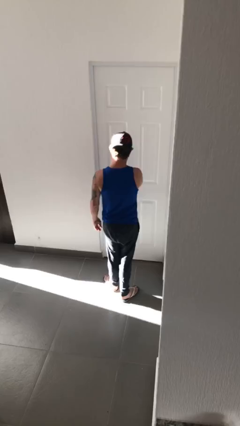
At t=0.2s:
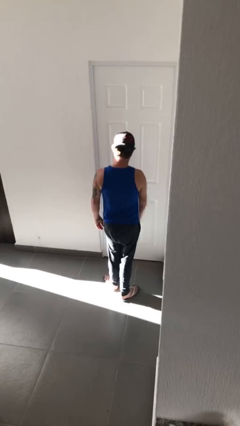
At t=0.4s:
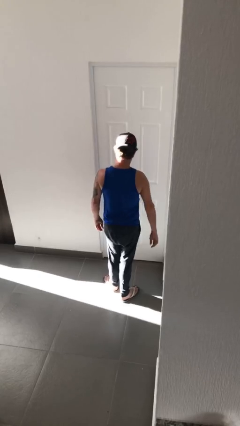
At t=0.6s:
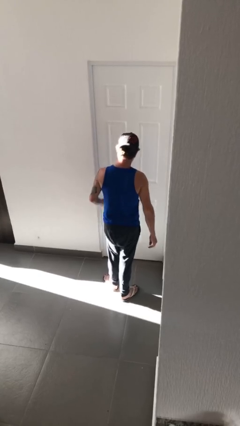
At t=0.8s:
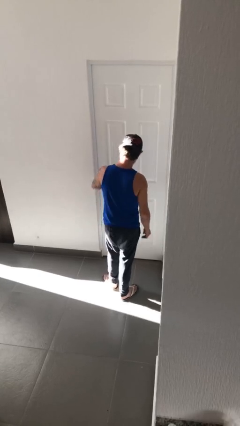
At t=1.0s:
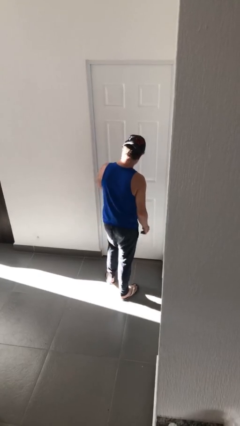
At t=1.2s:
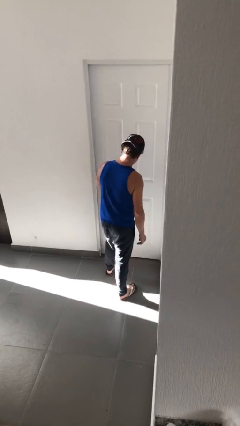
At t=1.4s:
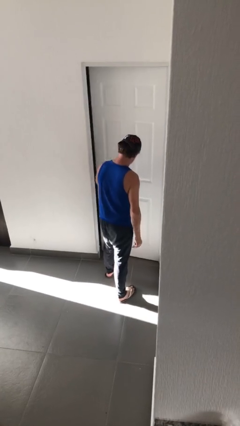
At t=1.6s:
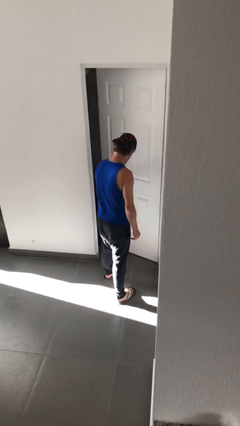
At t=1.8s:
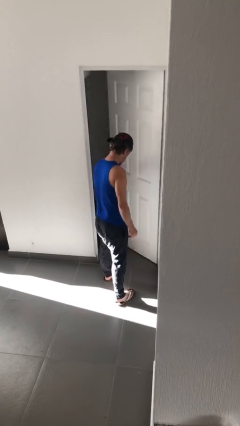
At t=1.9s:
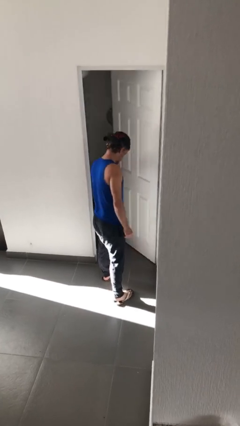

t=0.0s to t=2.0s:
person opens facility door

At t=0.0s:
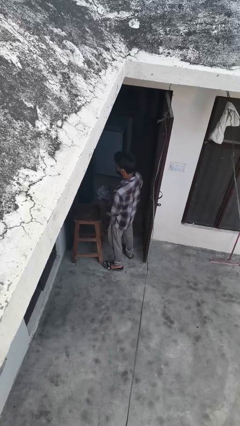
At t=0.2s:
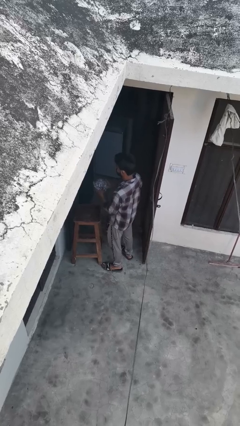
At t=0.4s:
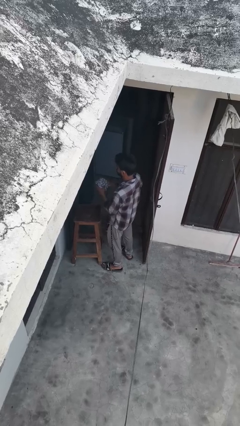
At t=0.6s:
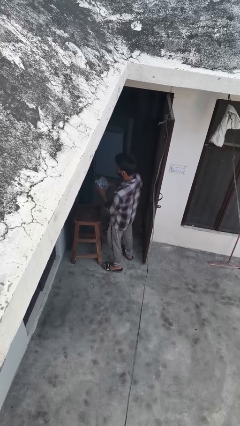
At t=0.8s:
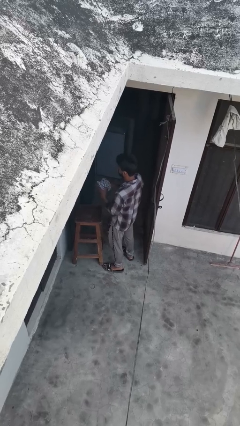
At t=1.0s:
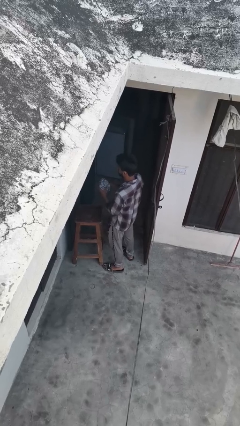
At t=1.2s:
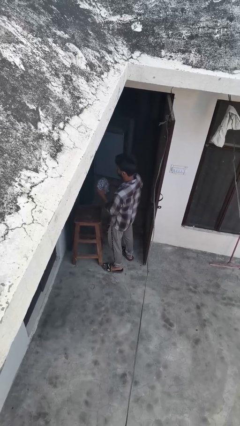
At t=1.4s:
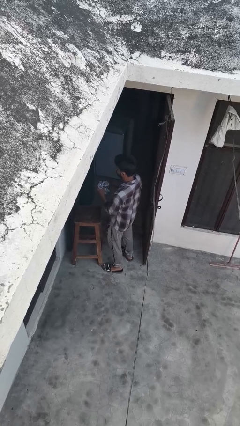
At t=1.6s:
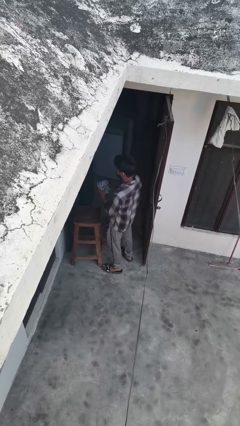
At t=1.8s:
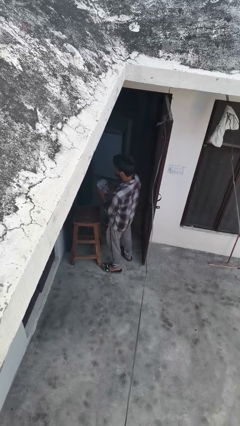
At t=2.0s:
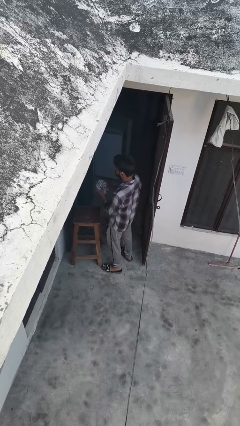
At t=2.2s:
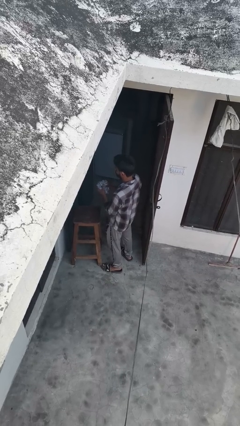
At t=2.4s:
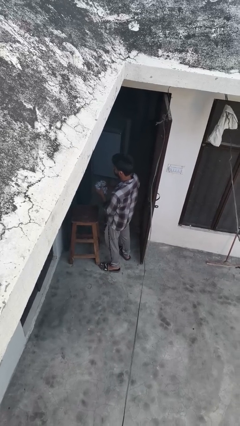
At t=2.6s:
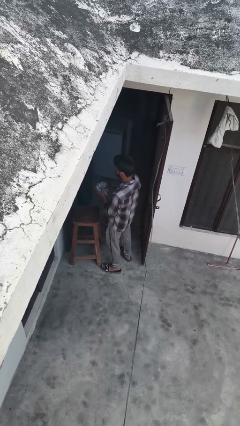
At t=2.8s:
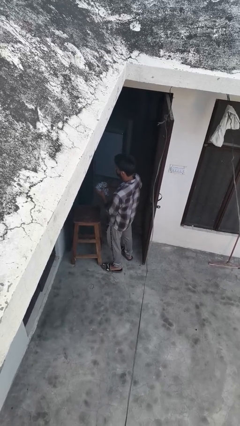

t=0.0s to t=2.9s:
person squeezes object

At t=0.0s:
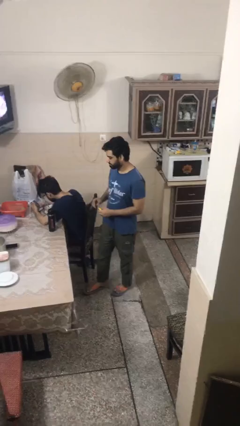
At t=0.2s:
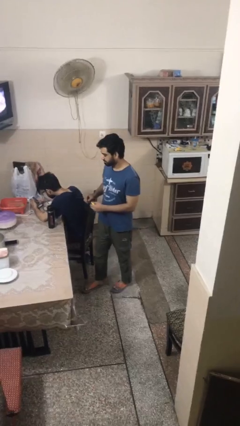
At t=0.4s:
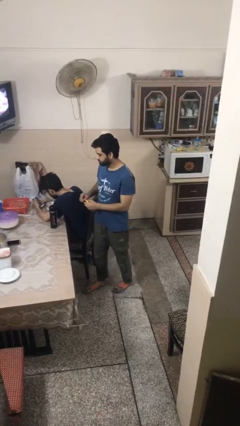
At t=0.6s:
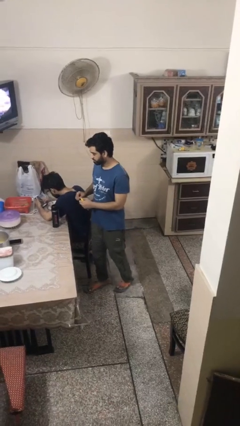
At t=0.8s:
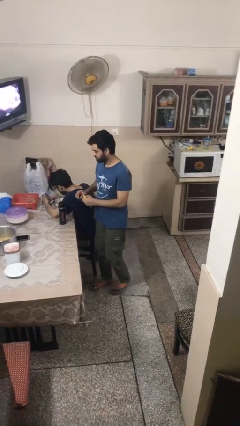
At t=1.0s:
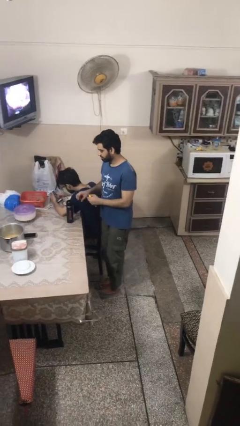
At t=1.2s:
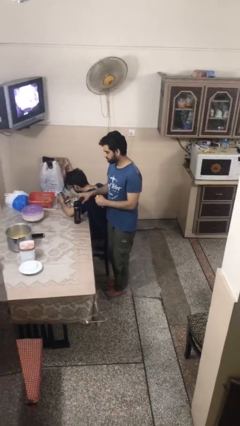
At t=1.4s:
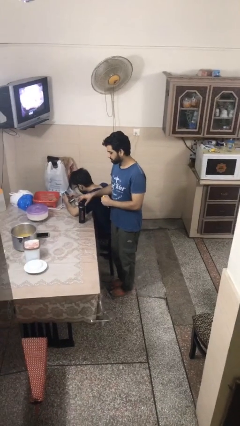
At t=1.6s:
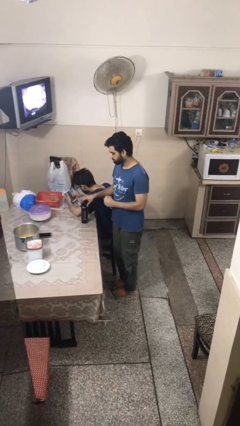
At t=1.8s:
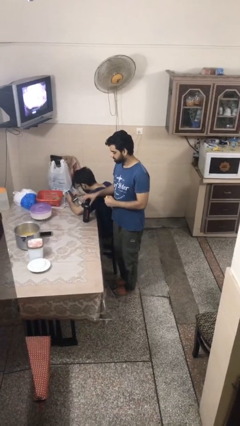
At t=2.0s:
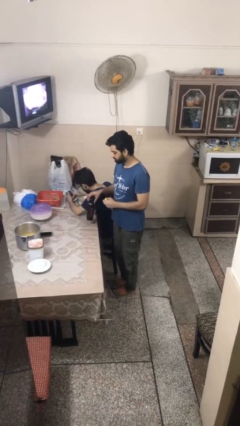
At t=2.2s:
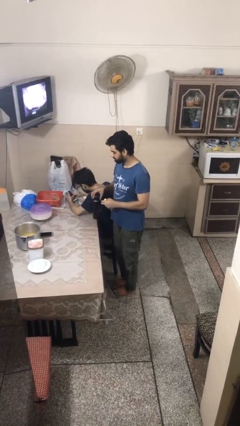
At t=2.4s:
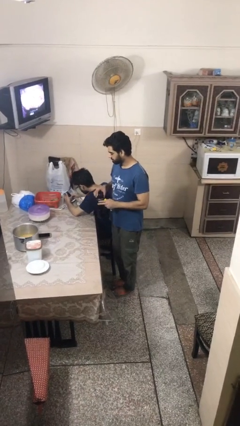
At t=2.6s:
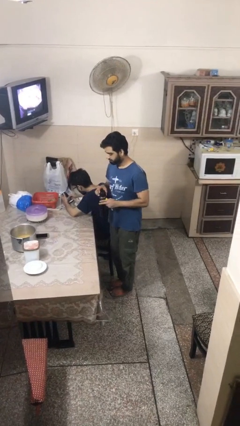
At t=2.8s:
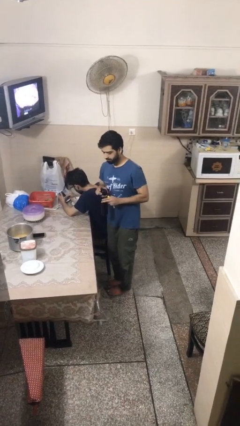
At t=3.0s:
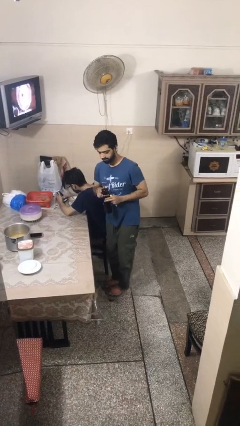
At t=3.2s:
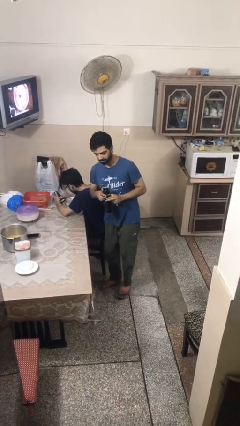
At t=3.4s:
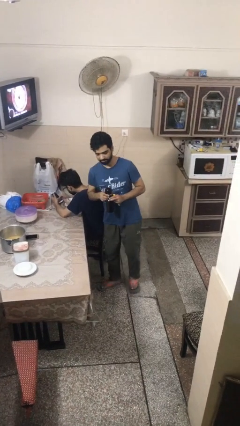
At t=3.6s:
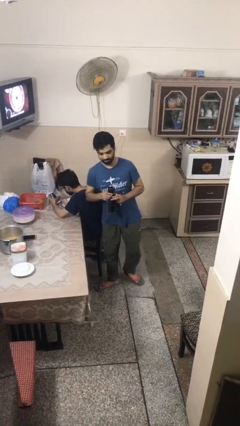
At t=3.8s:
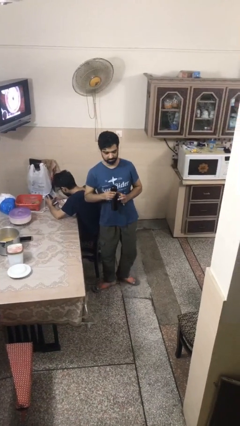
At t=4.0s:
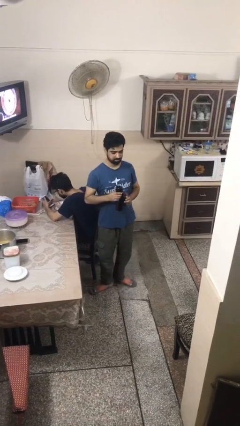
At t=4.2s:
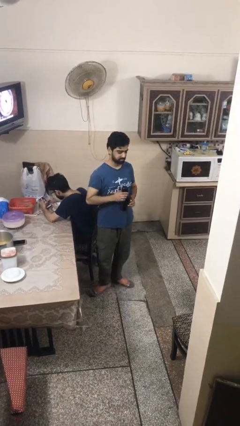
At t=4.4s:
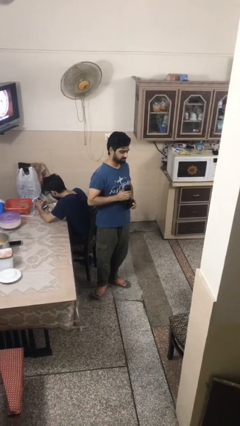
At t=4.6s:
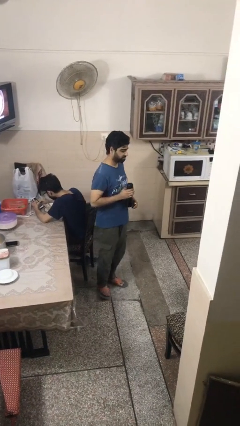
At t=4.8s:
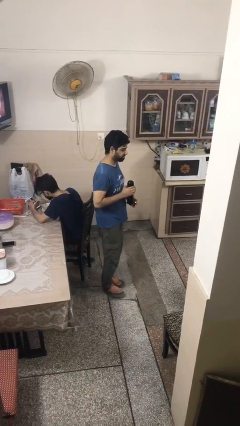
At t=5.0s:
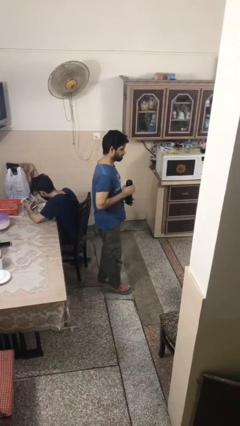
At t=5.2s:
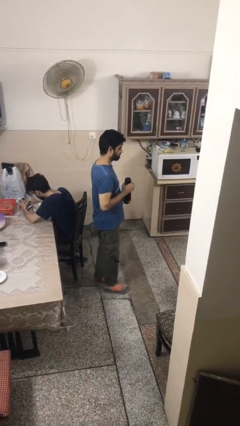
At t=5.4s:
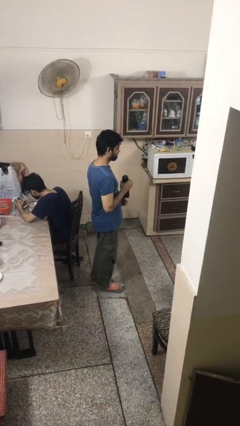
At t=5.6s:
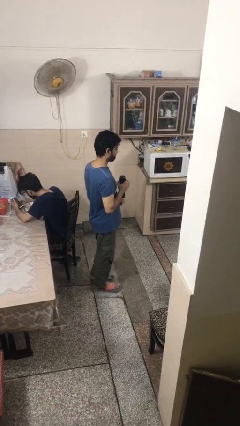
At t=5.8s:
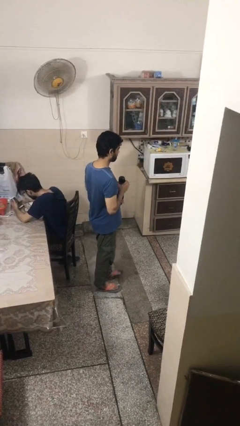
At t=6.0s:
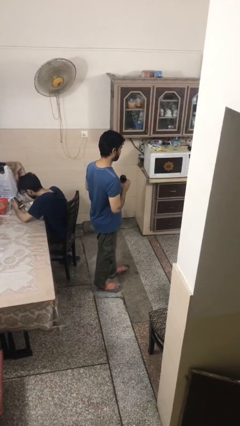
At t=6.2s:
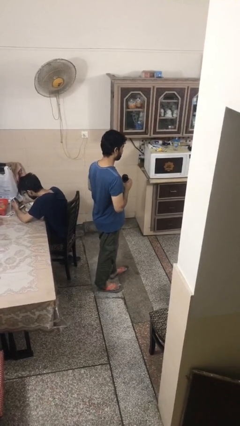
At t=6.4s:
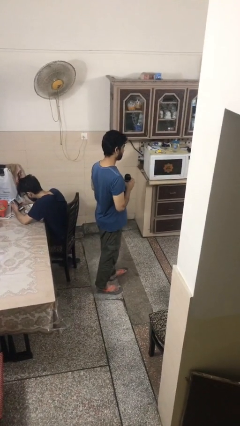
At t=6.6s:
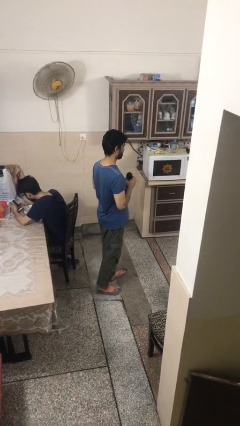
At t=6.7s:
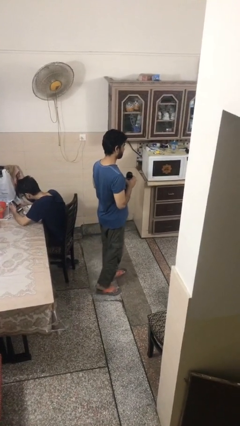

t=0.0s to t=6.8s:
person steals object from person

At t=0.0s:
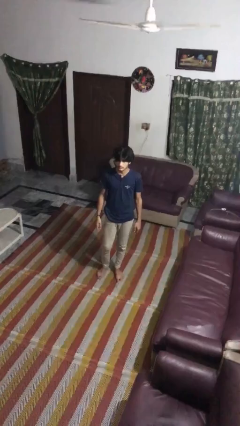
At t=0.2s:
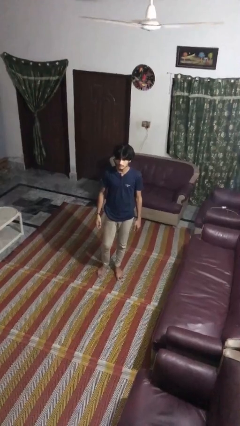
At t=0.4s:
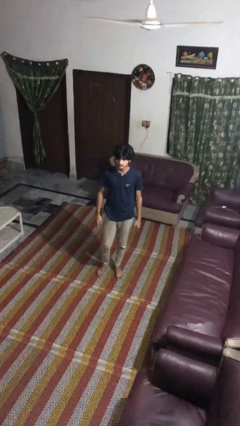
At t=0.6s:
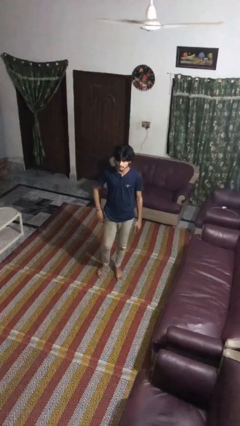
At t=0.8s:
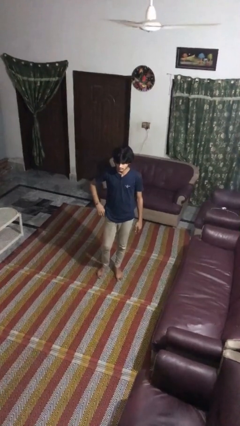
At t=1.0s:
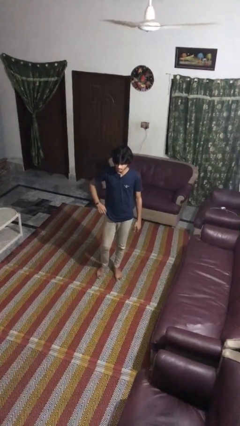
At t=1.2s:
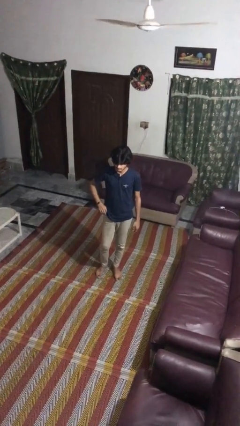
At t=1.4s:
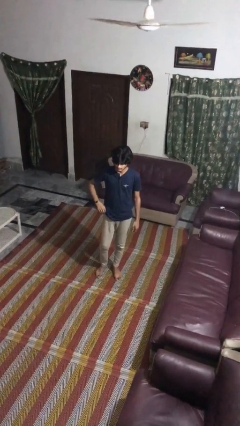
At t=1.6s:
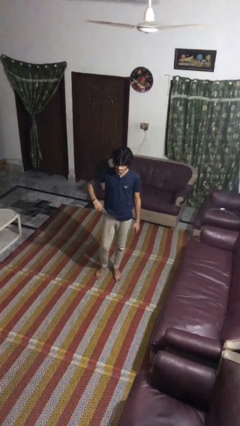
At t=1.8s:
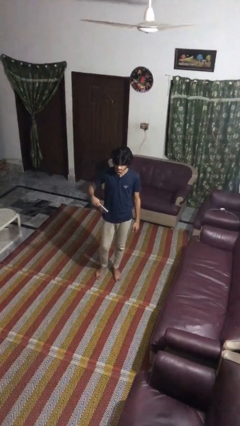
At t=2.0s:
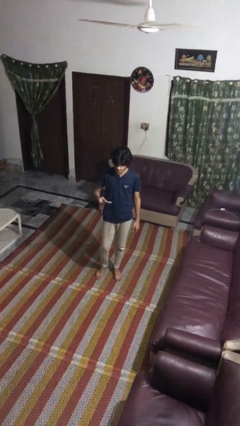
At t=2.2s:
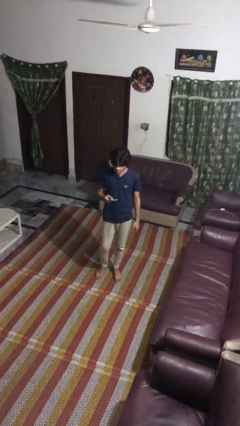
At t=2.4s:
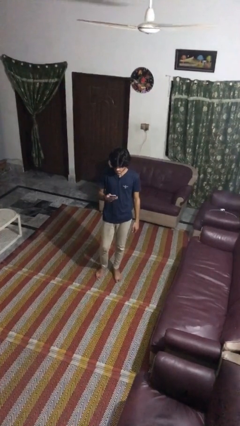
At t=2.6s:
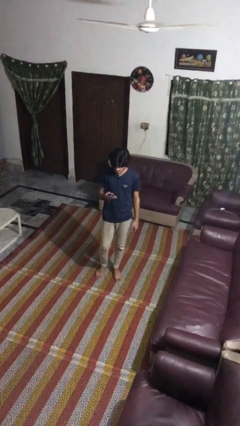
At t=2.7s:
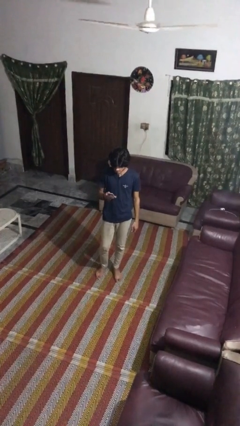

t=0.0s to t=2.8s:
person takes phone from pocket

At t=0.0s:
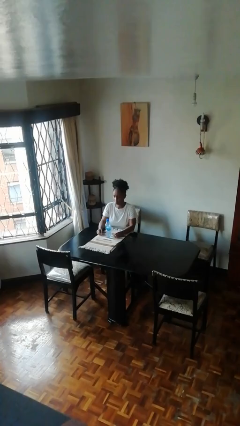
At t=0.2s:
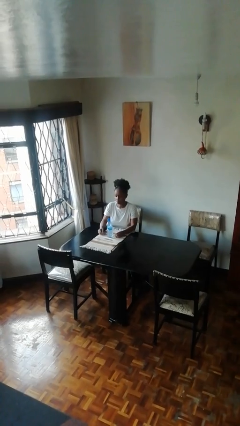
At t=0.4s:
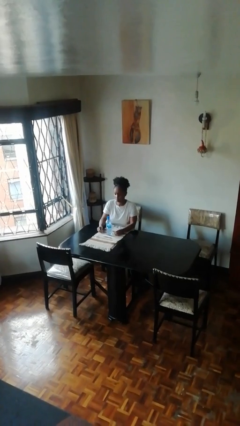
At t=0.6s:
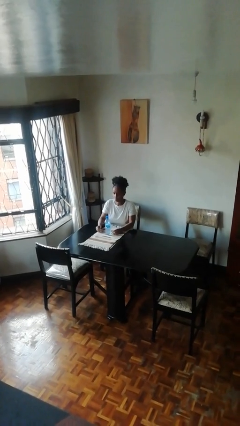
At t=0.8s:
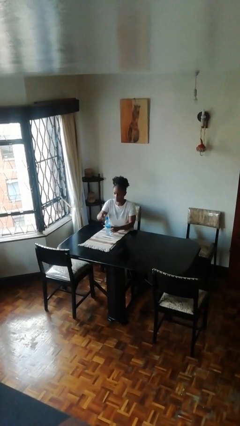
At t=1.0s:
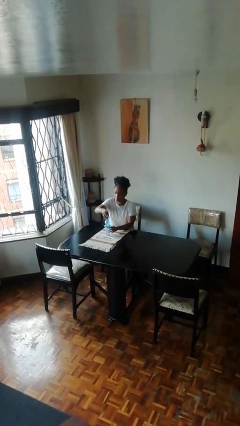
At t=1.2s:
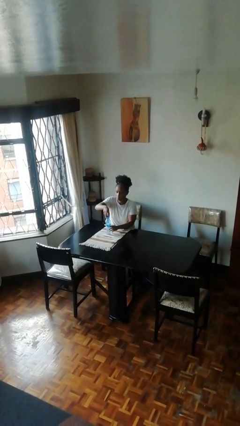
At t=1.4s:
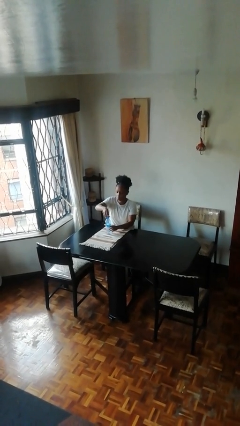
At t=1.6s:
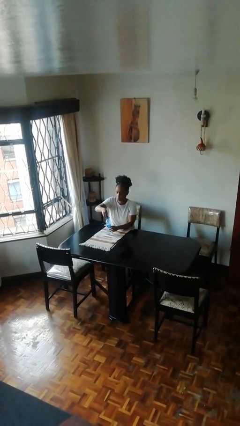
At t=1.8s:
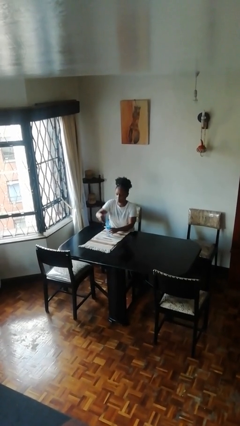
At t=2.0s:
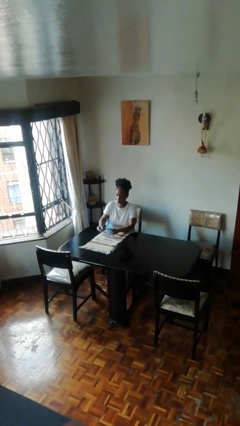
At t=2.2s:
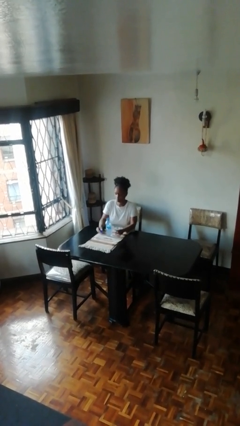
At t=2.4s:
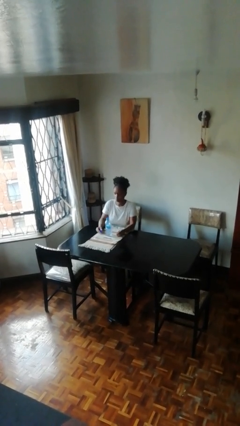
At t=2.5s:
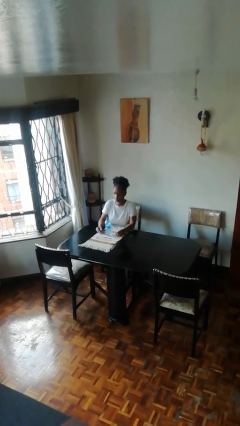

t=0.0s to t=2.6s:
person unscrews lid from bottle

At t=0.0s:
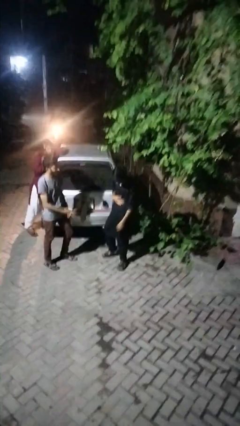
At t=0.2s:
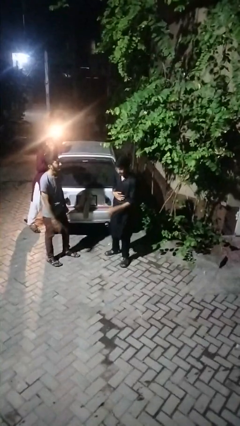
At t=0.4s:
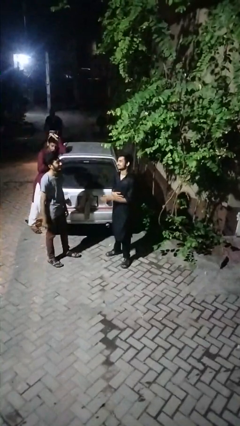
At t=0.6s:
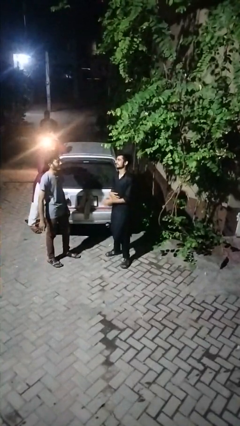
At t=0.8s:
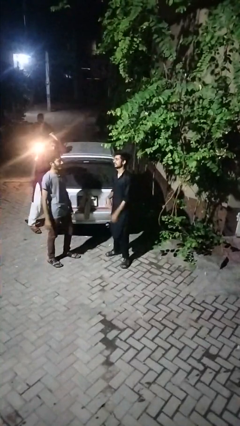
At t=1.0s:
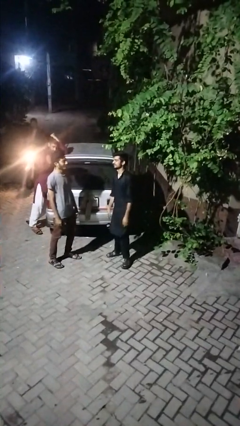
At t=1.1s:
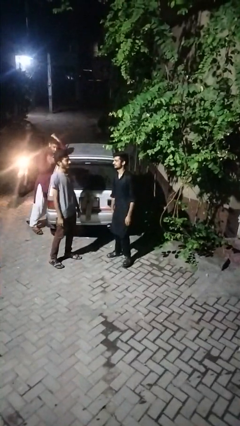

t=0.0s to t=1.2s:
person laughs with person
